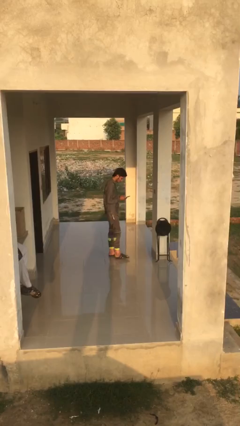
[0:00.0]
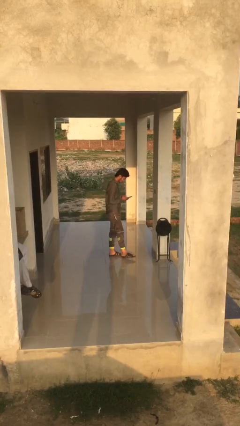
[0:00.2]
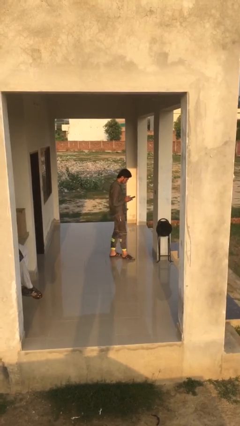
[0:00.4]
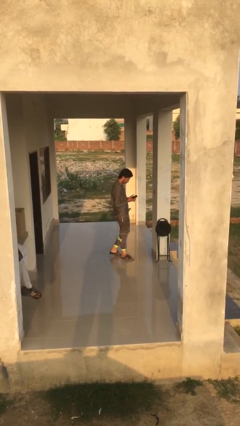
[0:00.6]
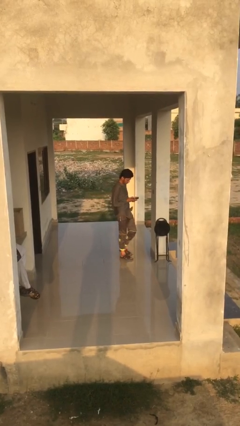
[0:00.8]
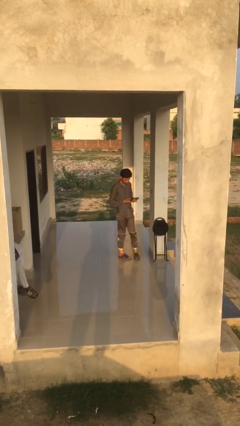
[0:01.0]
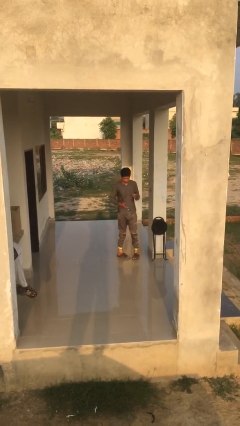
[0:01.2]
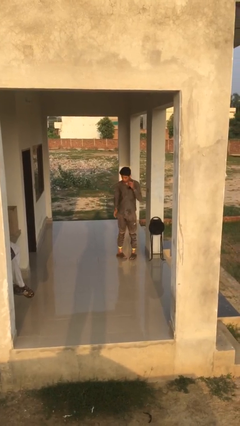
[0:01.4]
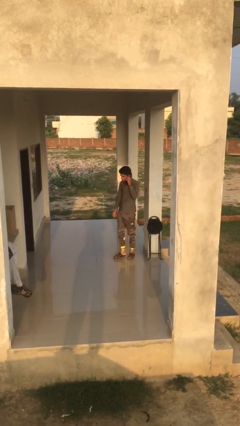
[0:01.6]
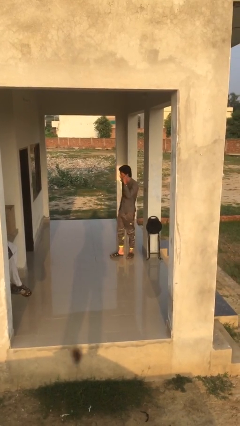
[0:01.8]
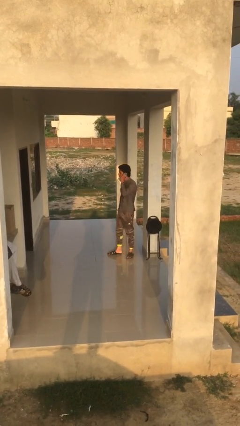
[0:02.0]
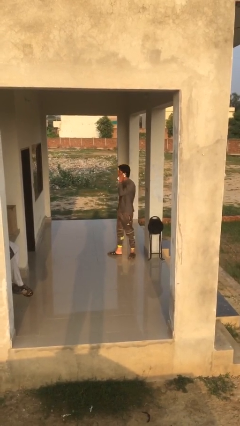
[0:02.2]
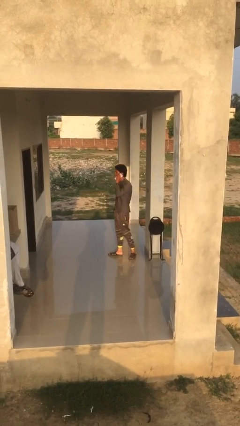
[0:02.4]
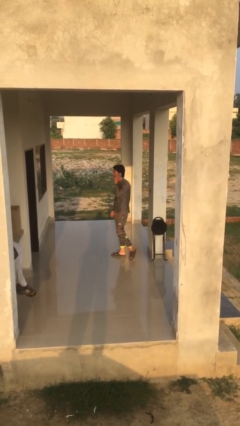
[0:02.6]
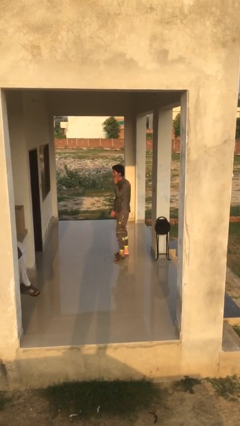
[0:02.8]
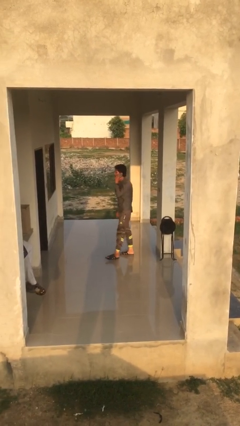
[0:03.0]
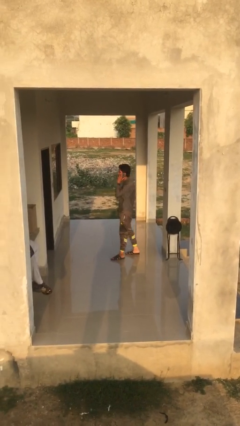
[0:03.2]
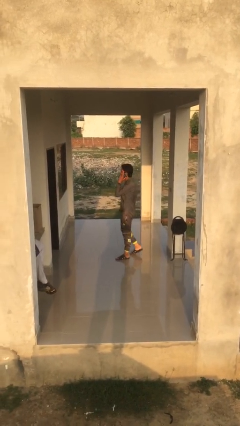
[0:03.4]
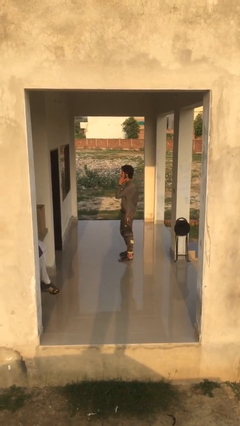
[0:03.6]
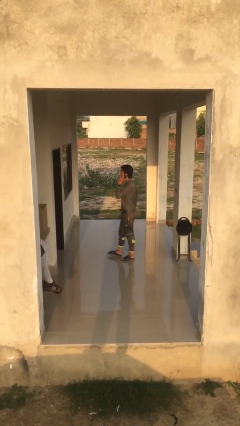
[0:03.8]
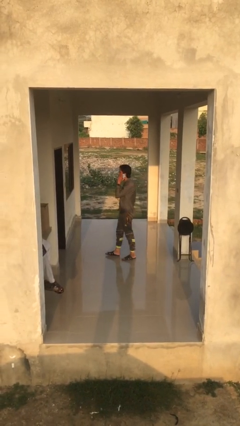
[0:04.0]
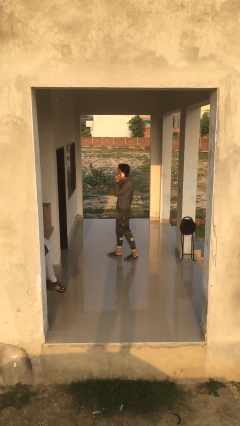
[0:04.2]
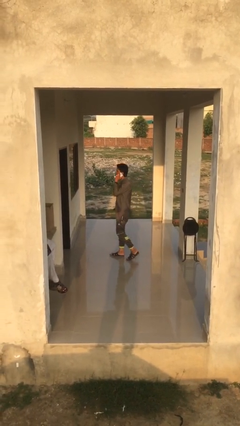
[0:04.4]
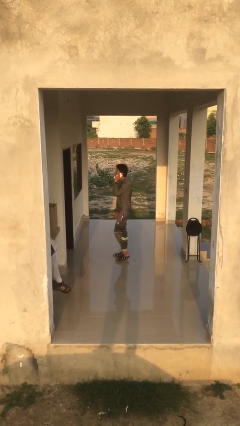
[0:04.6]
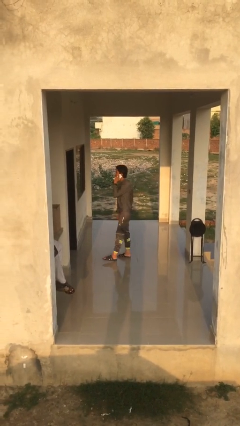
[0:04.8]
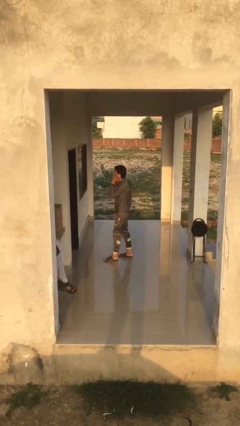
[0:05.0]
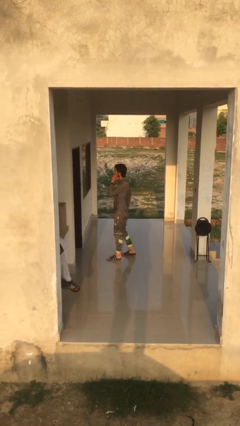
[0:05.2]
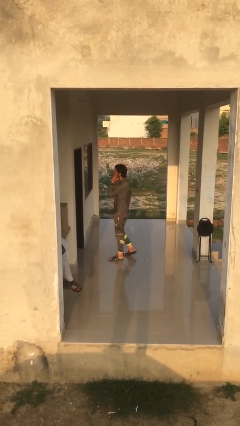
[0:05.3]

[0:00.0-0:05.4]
person talks on phone

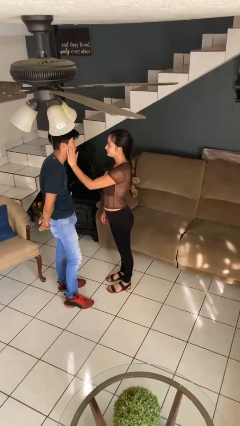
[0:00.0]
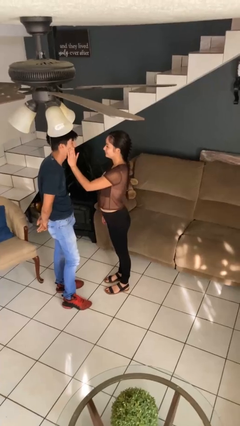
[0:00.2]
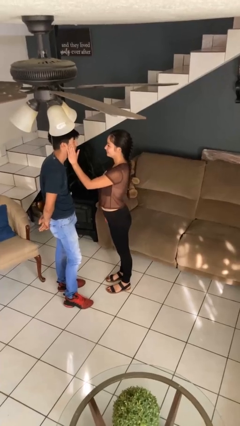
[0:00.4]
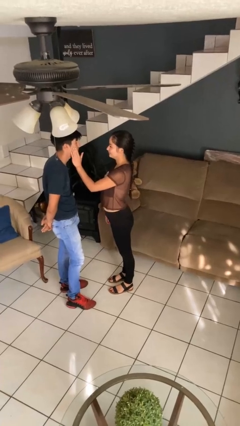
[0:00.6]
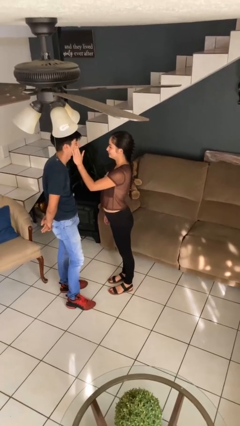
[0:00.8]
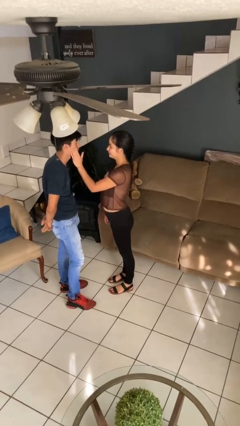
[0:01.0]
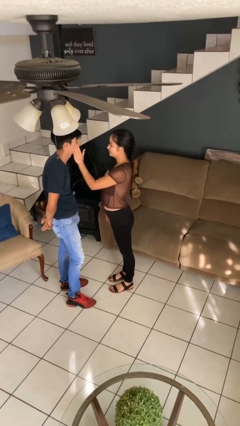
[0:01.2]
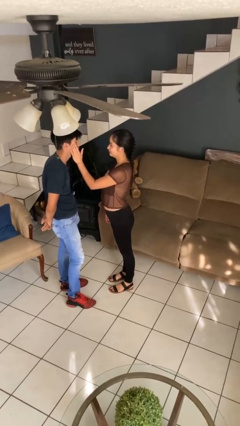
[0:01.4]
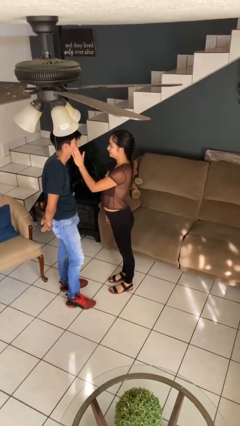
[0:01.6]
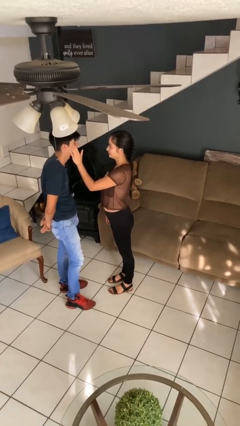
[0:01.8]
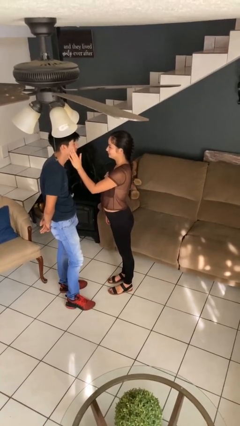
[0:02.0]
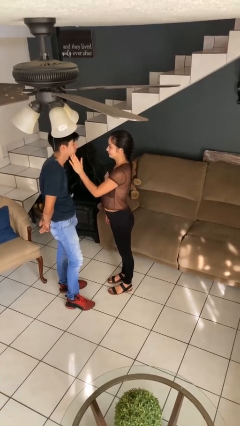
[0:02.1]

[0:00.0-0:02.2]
person touches face of person

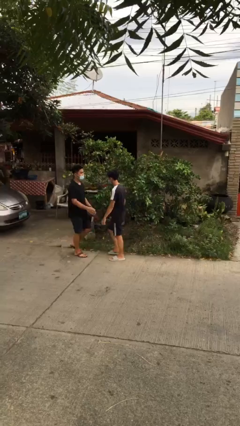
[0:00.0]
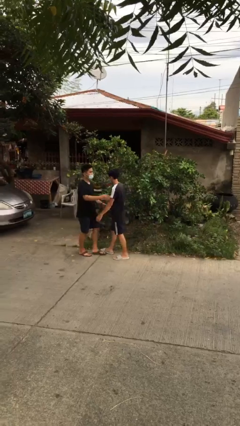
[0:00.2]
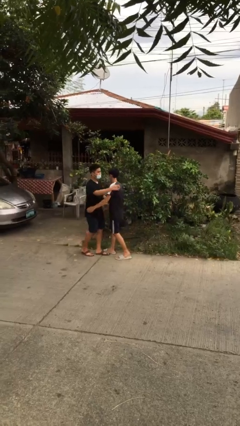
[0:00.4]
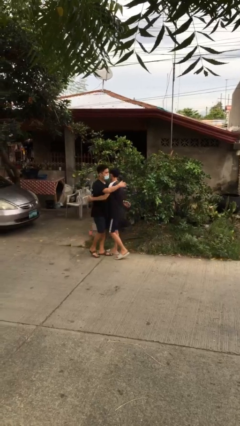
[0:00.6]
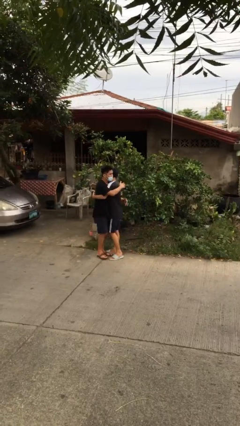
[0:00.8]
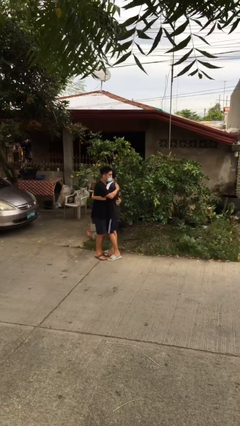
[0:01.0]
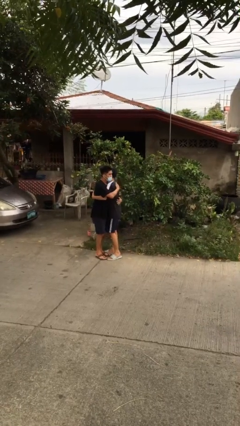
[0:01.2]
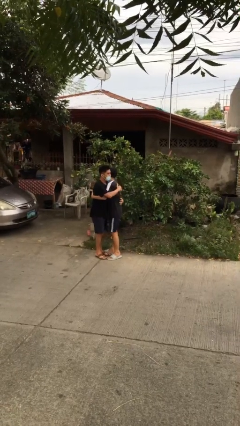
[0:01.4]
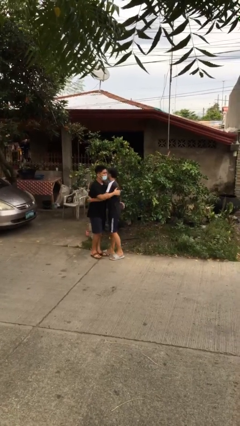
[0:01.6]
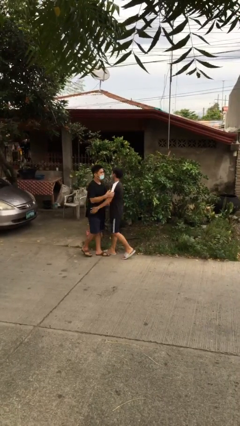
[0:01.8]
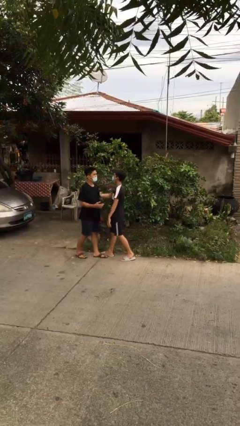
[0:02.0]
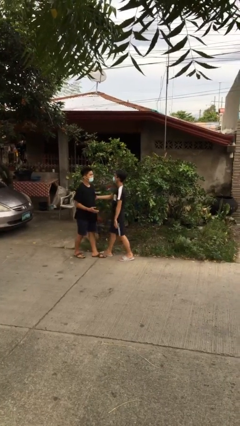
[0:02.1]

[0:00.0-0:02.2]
person embraces person

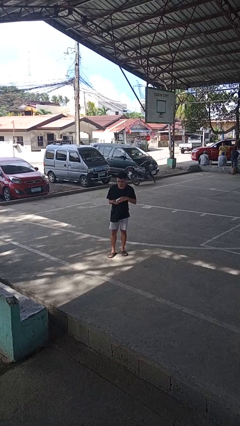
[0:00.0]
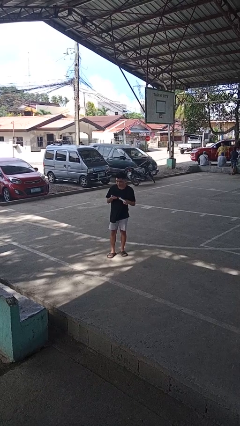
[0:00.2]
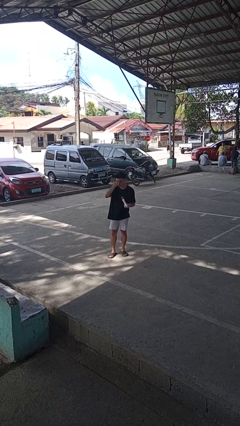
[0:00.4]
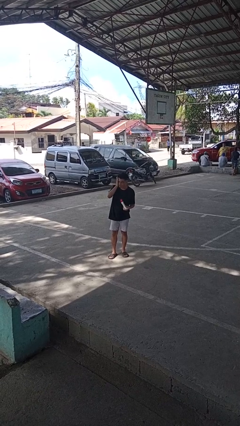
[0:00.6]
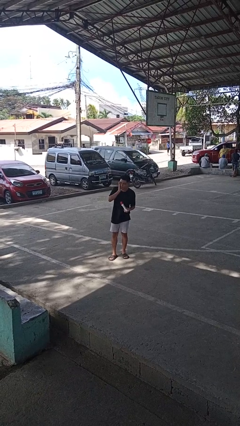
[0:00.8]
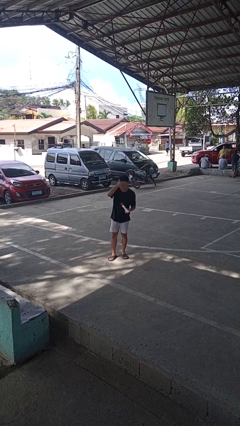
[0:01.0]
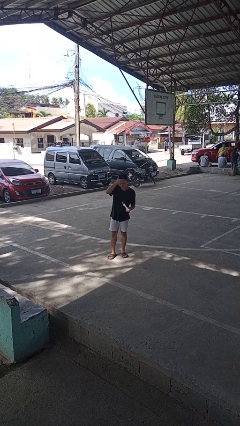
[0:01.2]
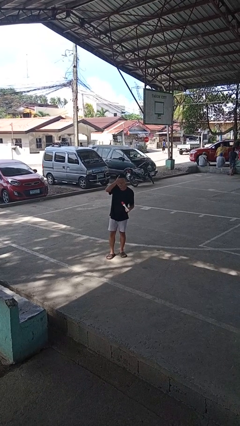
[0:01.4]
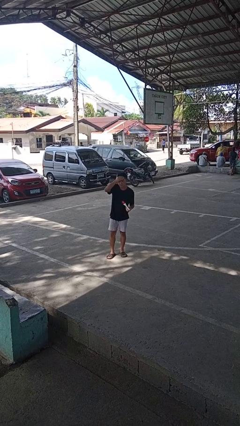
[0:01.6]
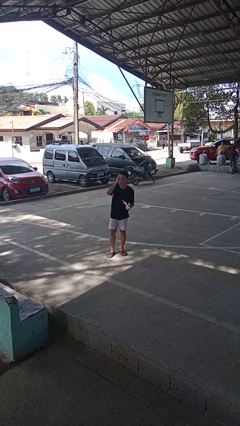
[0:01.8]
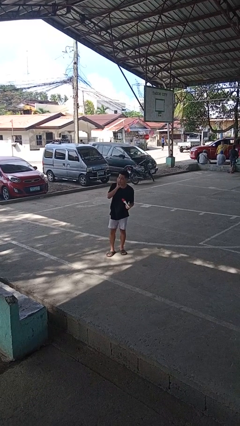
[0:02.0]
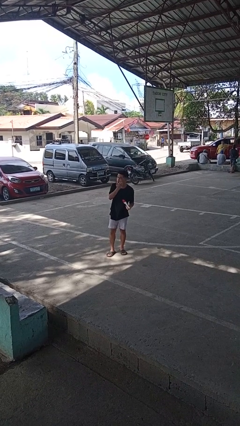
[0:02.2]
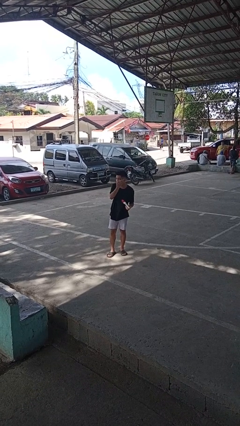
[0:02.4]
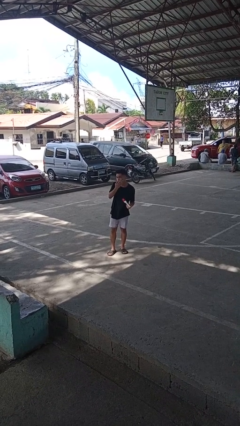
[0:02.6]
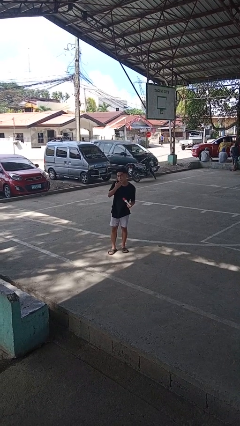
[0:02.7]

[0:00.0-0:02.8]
person applies facial moisturizer

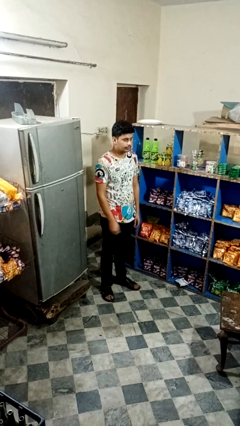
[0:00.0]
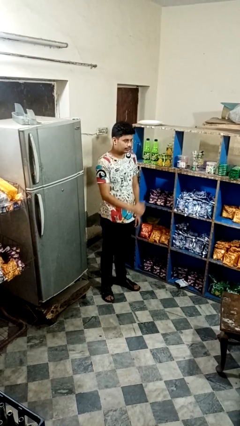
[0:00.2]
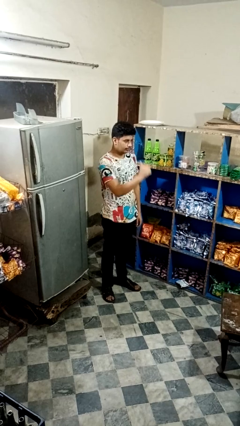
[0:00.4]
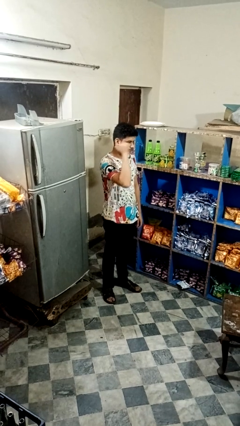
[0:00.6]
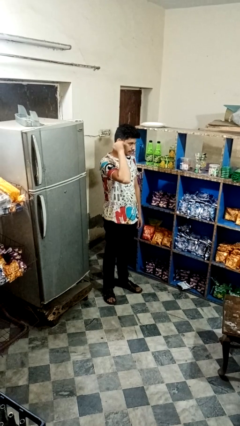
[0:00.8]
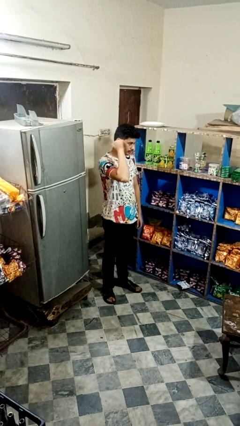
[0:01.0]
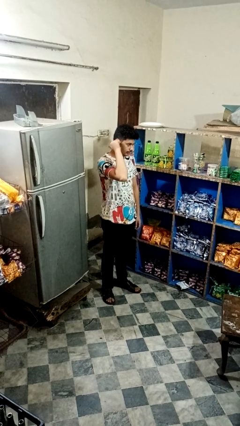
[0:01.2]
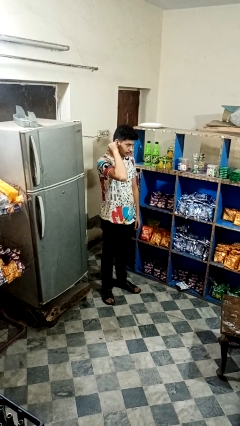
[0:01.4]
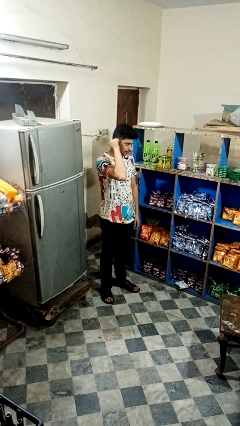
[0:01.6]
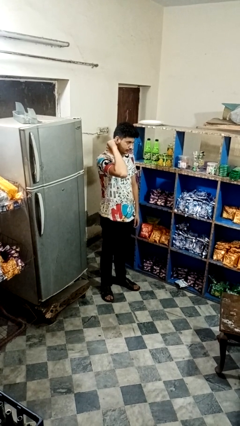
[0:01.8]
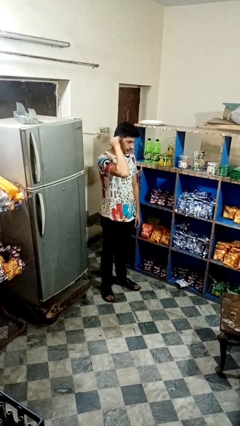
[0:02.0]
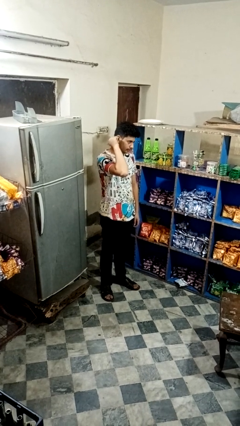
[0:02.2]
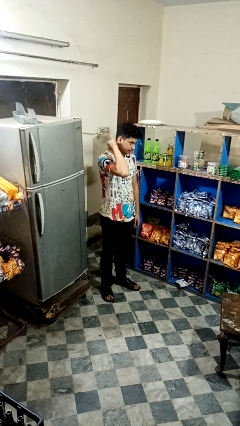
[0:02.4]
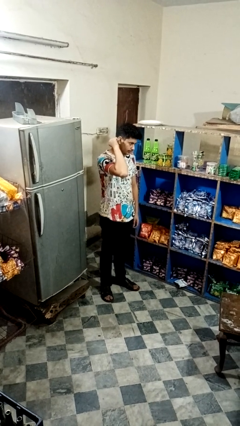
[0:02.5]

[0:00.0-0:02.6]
person gestures behind me

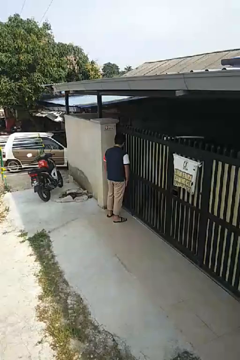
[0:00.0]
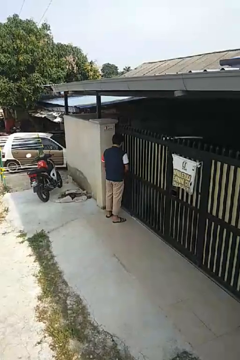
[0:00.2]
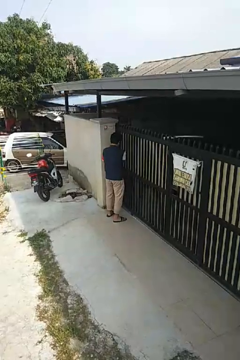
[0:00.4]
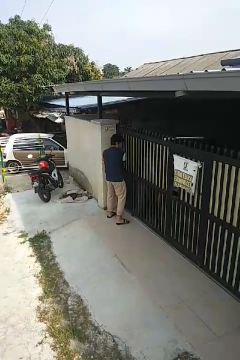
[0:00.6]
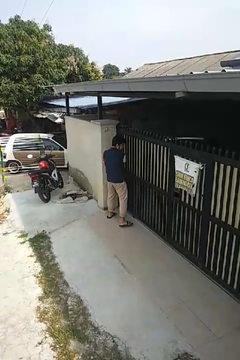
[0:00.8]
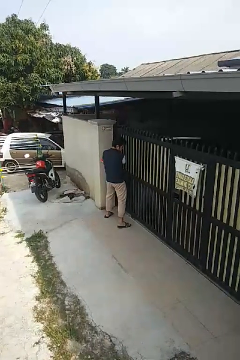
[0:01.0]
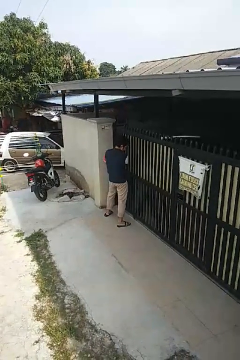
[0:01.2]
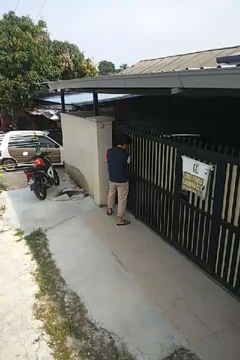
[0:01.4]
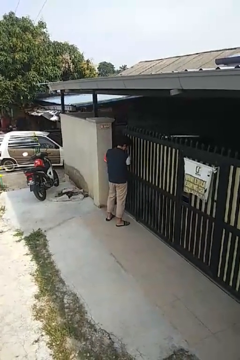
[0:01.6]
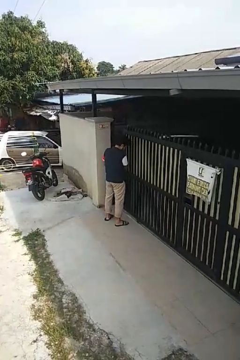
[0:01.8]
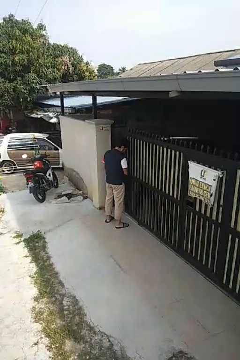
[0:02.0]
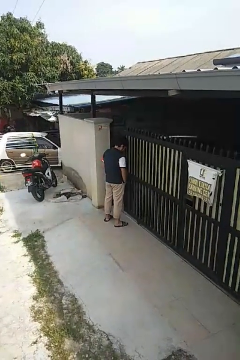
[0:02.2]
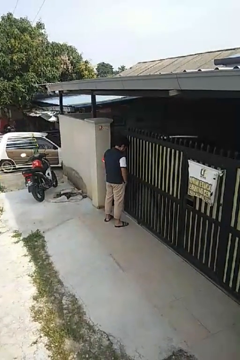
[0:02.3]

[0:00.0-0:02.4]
person opens sliding door

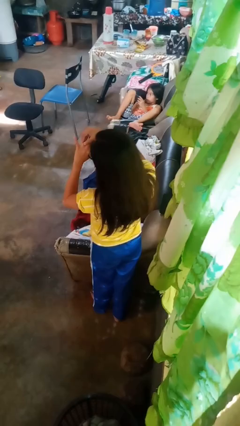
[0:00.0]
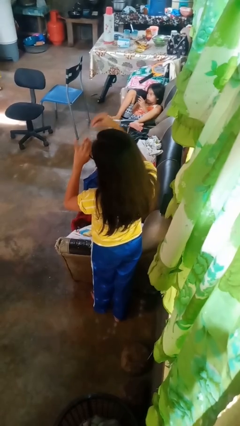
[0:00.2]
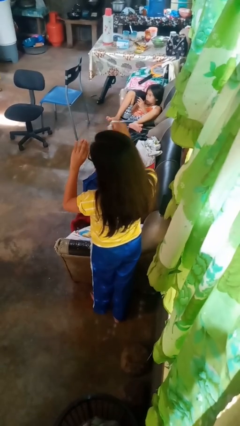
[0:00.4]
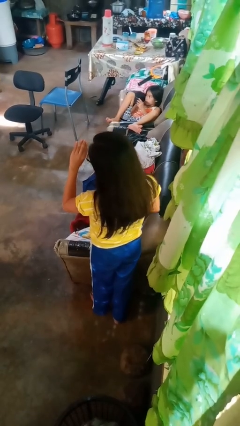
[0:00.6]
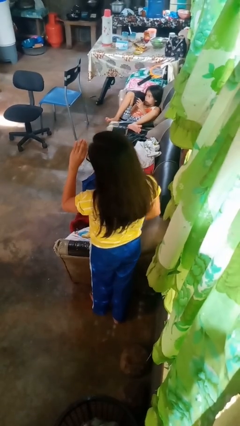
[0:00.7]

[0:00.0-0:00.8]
person takes off ring
